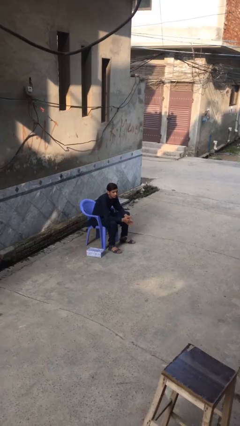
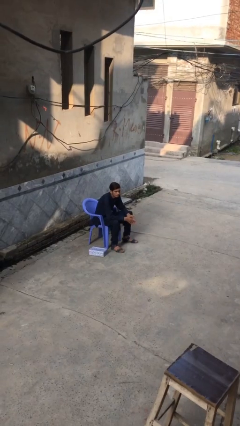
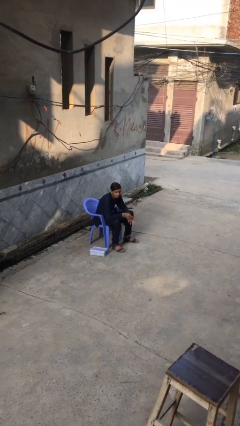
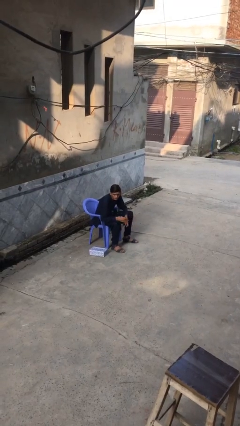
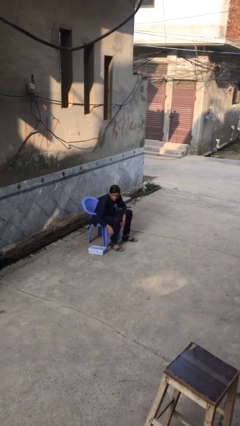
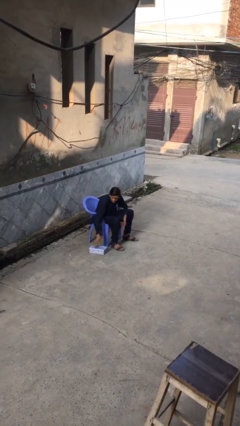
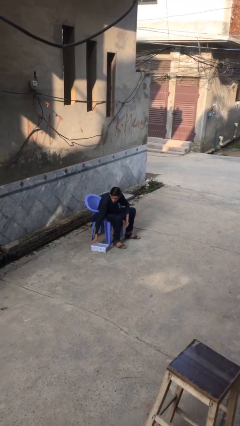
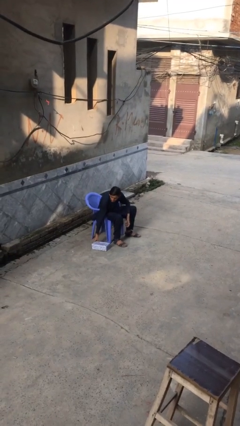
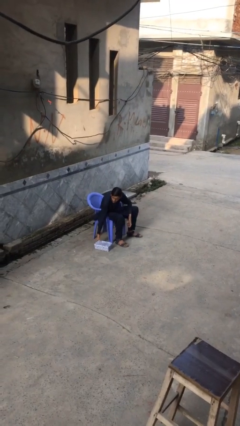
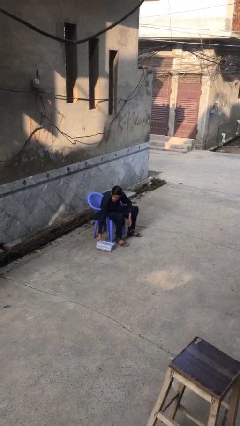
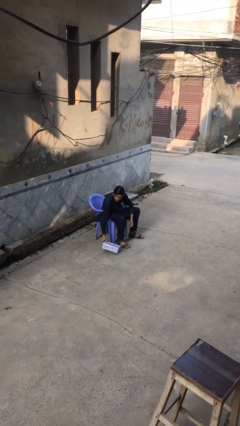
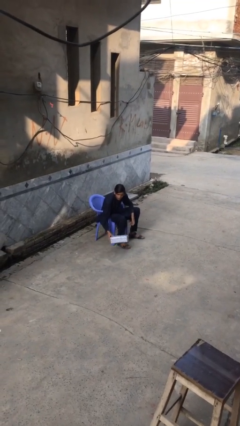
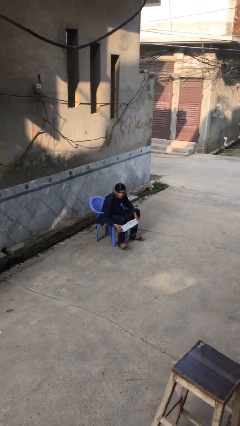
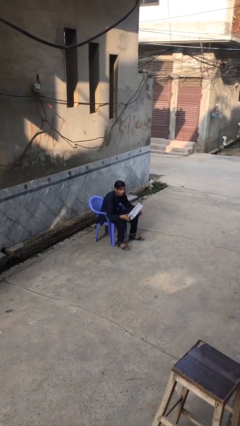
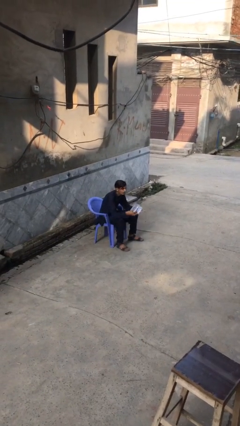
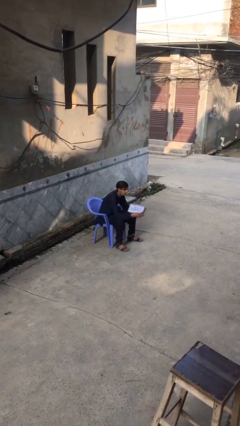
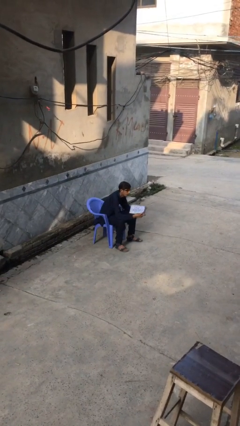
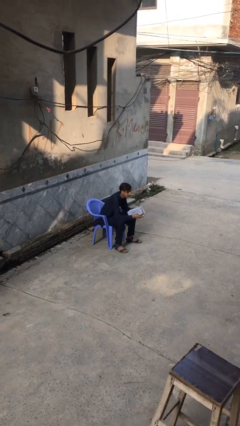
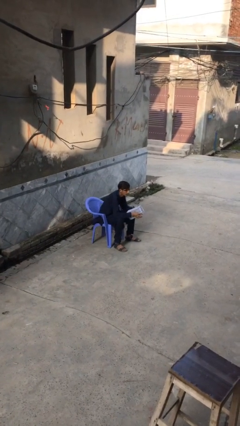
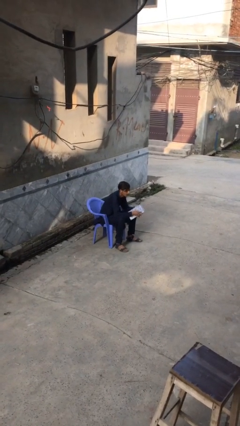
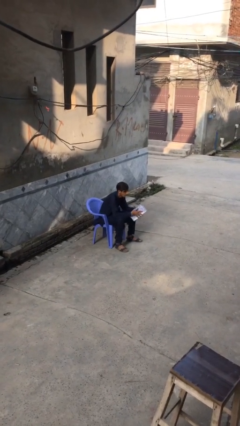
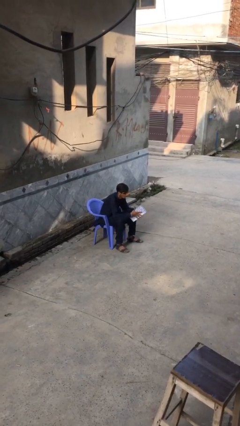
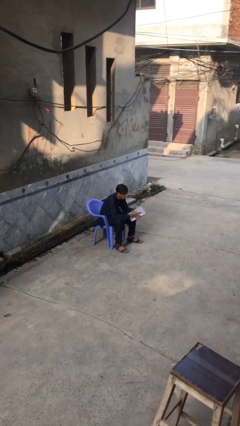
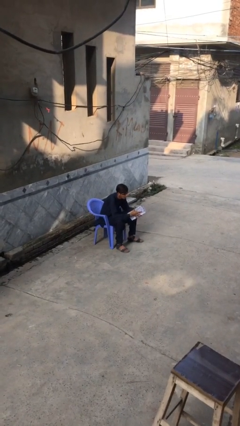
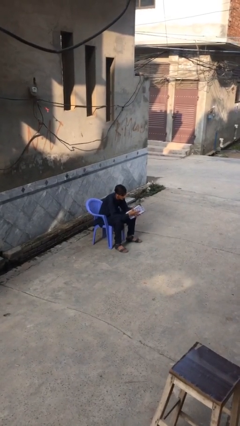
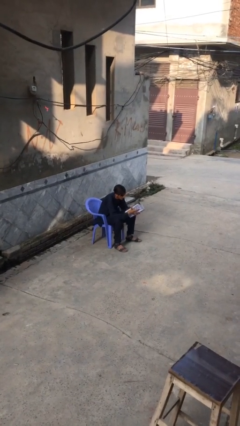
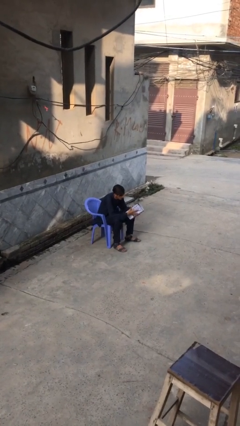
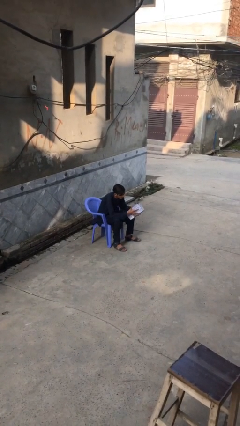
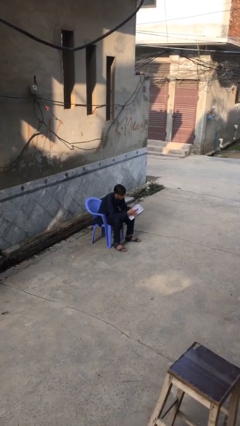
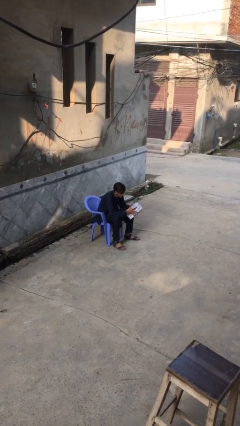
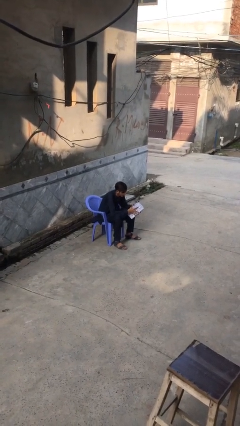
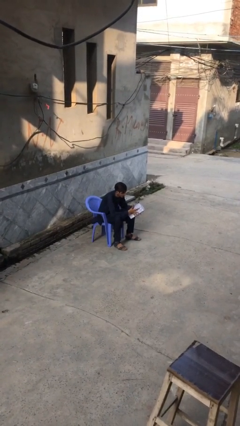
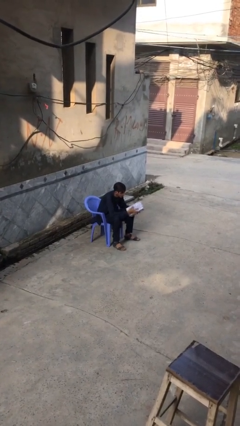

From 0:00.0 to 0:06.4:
person picks up object from floor

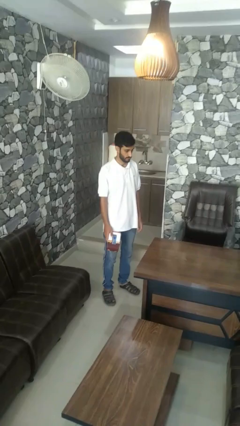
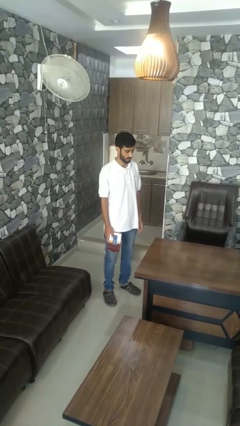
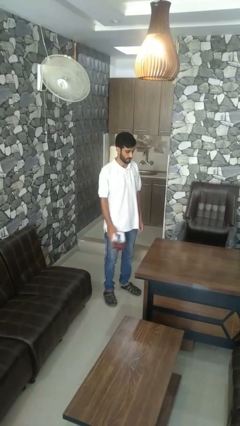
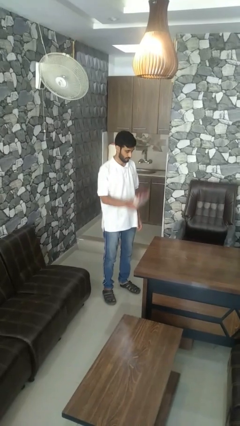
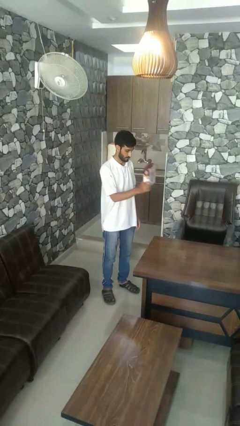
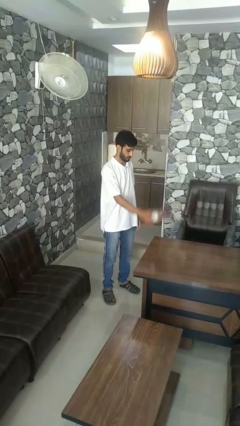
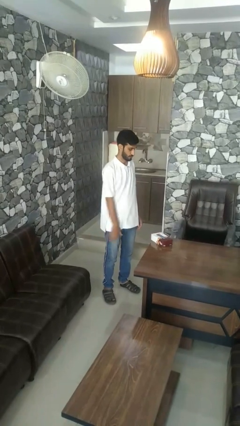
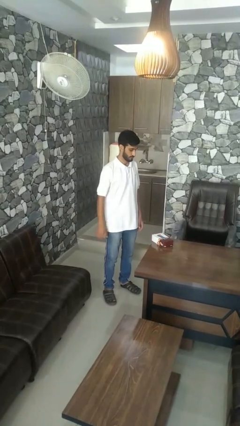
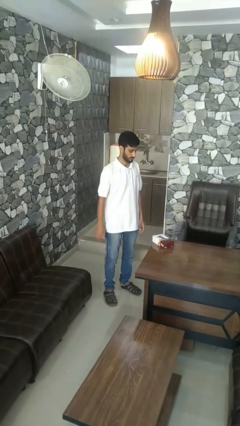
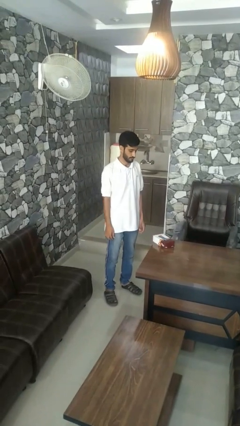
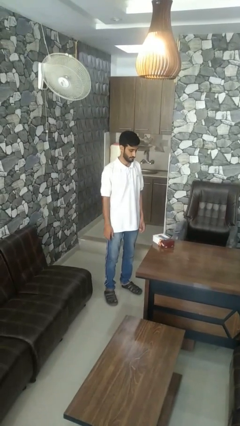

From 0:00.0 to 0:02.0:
person throws object on table

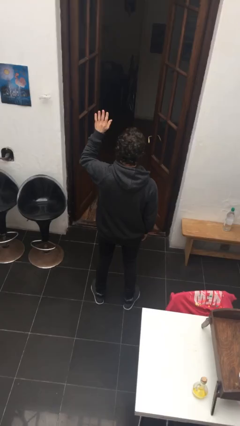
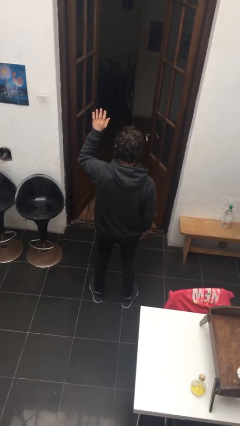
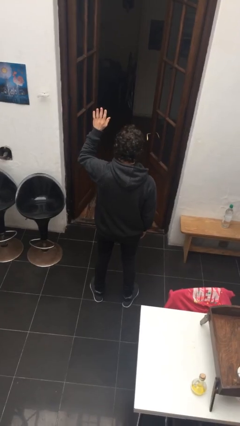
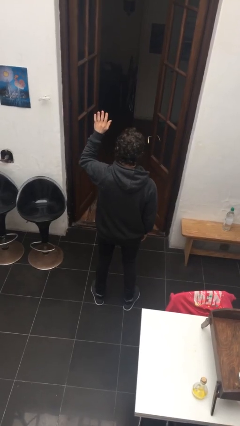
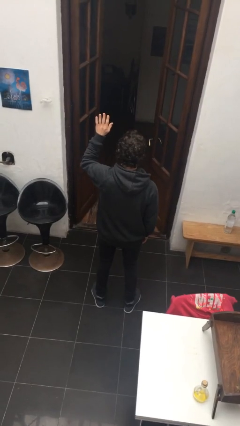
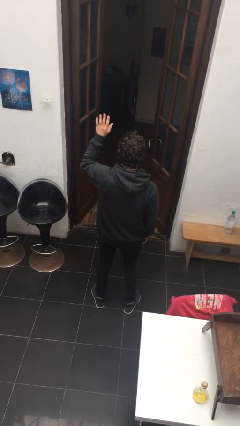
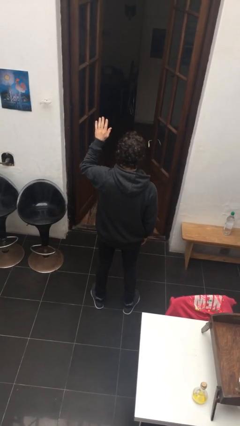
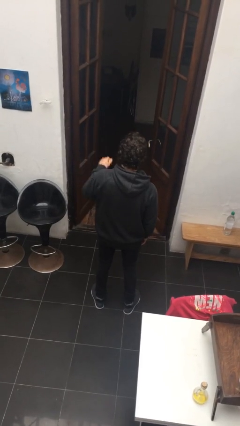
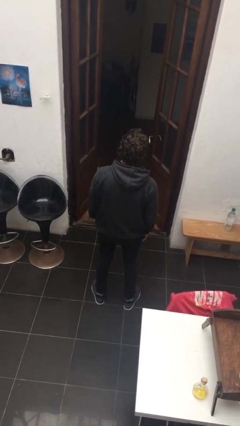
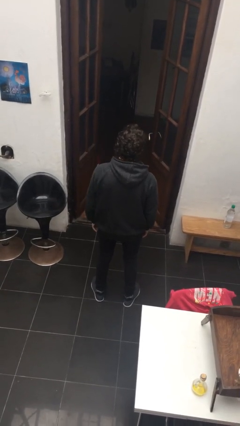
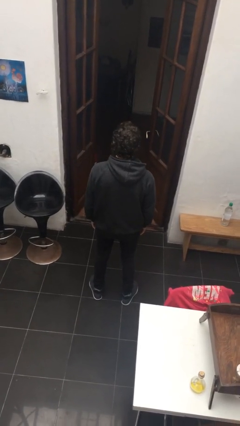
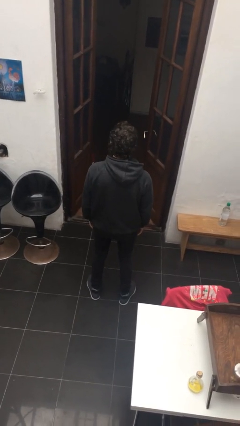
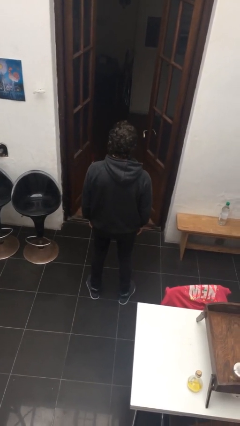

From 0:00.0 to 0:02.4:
person gestures lower hand

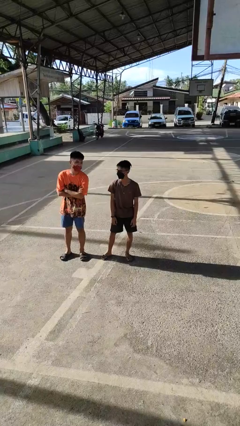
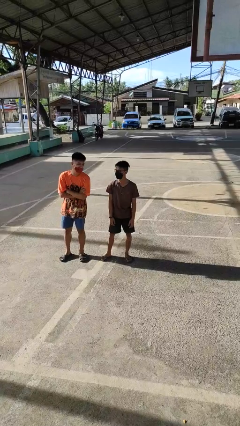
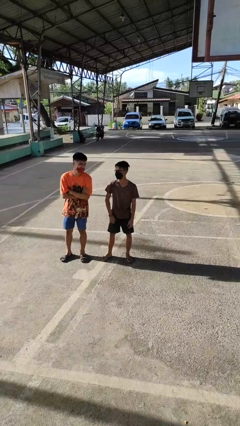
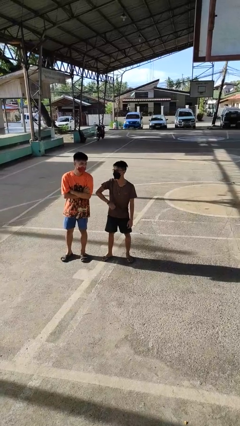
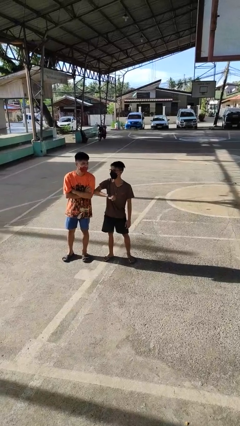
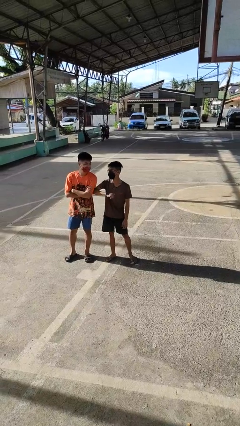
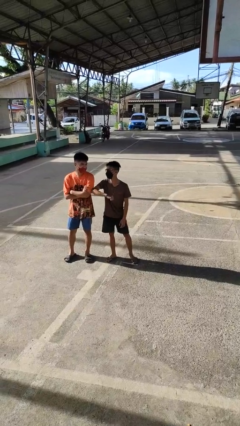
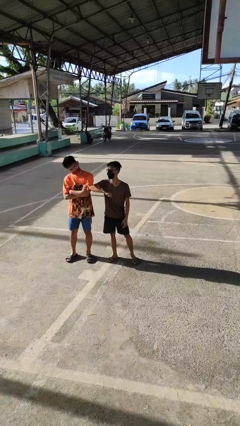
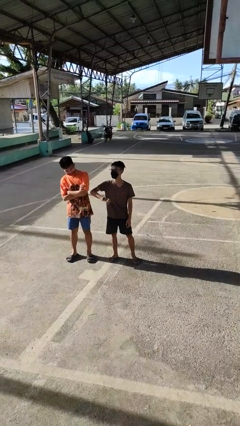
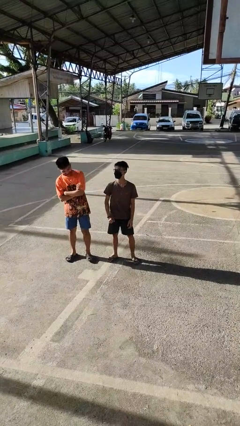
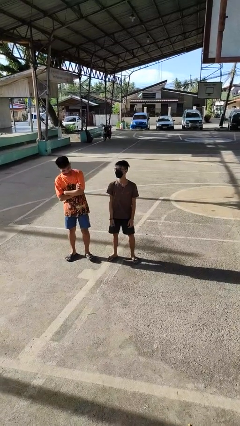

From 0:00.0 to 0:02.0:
person nudges person with elbow

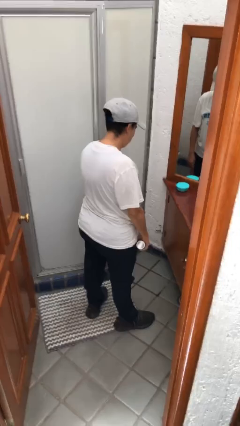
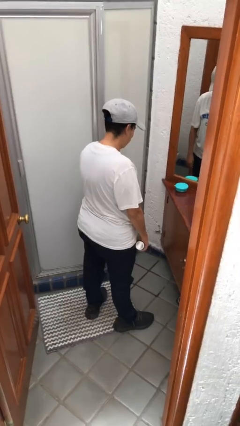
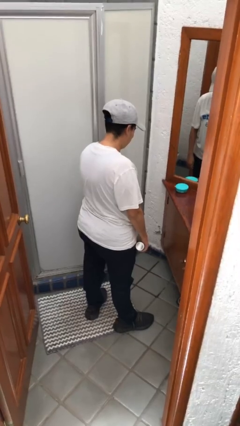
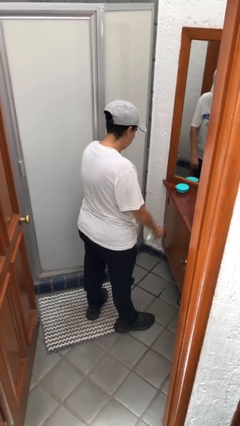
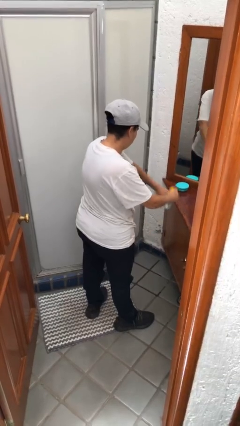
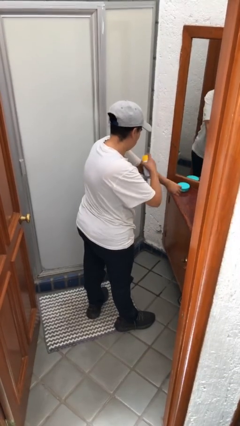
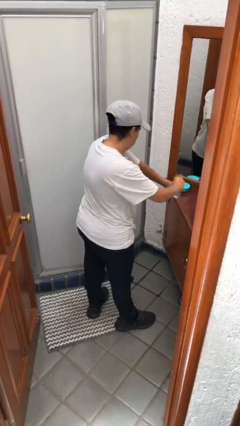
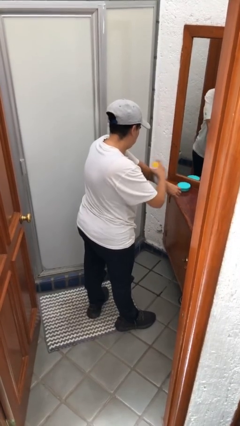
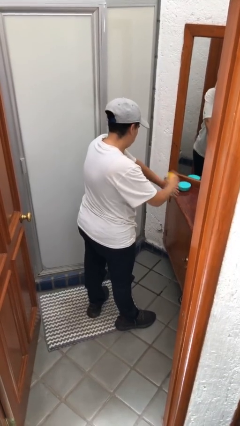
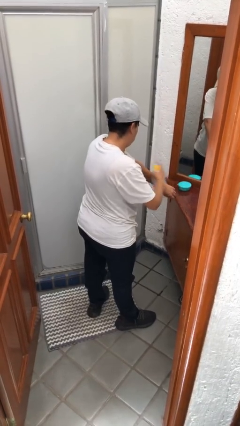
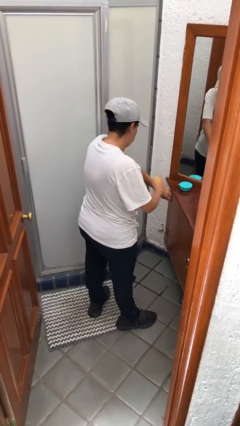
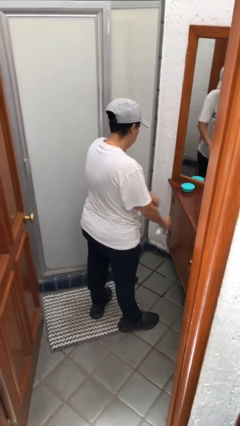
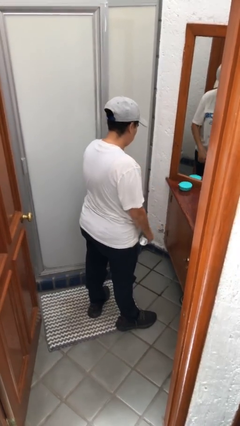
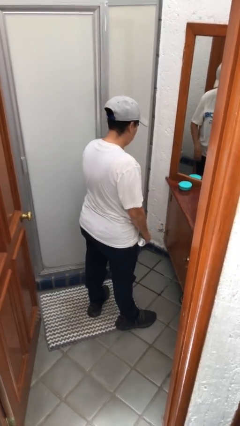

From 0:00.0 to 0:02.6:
person applies sunscreen

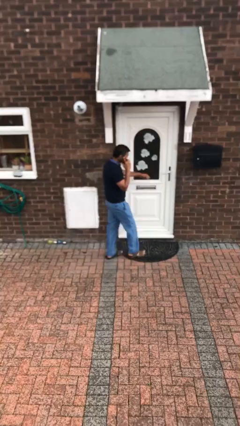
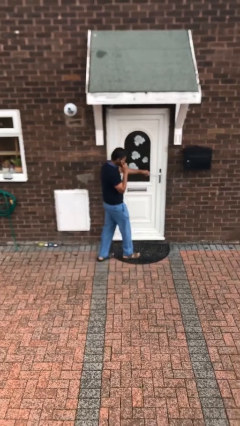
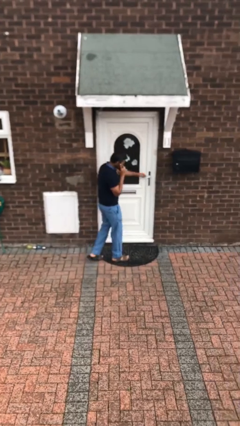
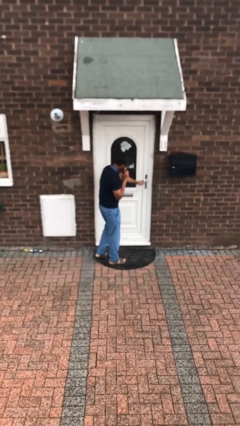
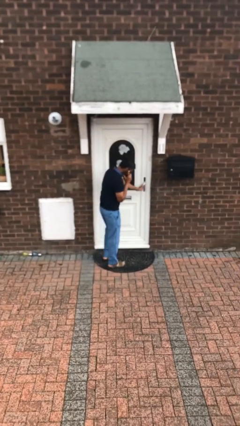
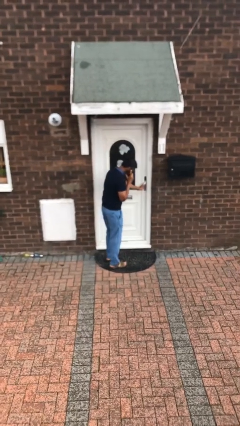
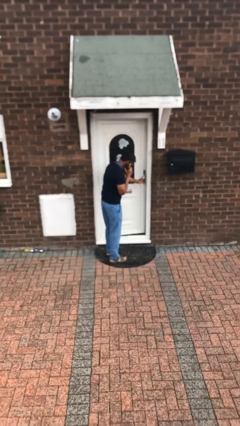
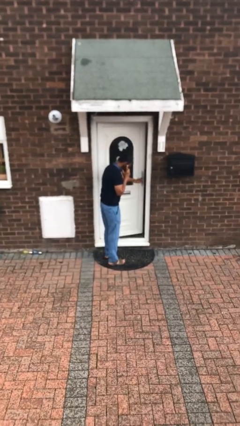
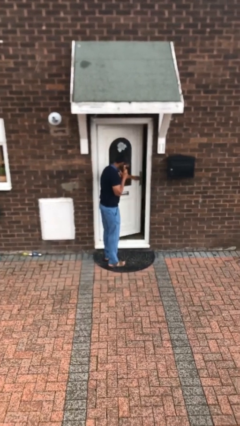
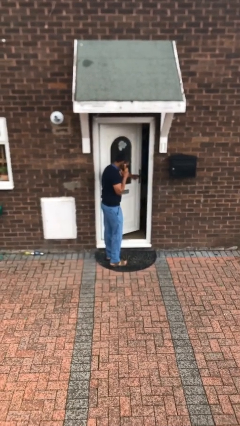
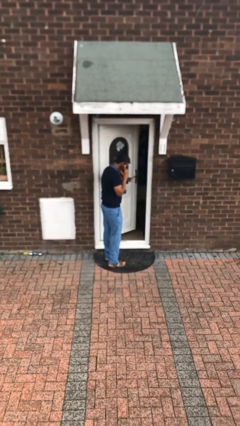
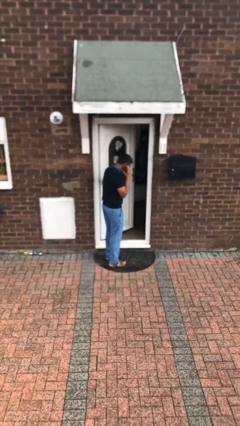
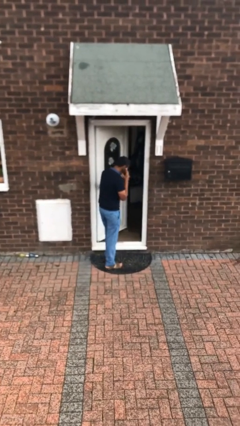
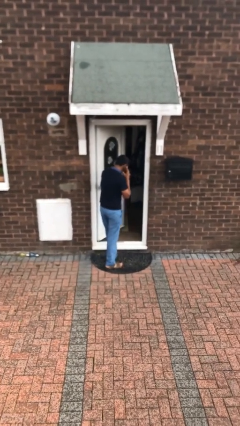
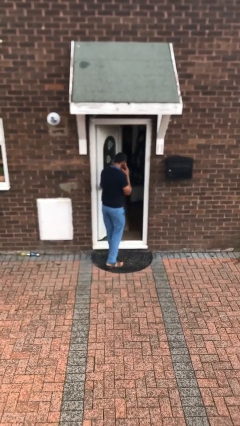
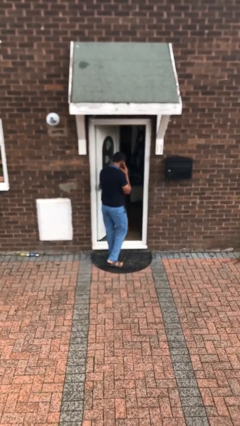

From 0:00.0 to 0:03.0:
person opens facility door
